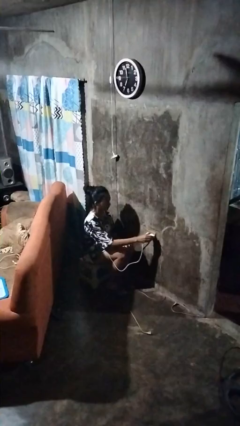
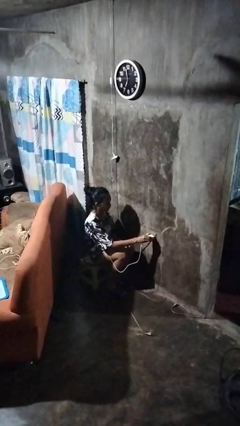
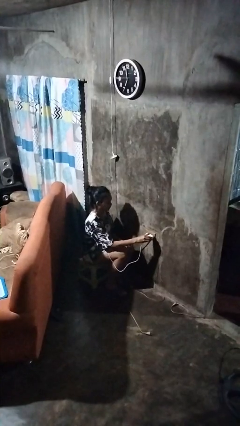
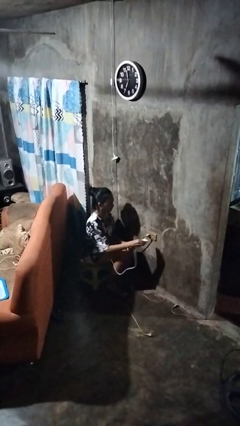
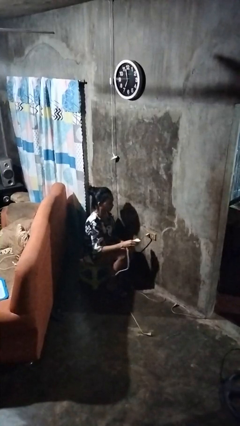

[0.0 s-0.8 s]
person unplugs from electrical socket

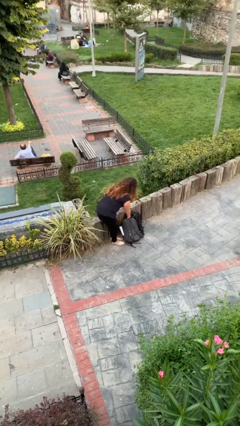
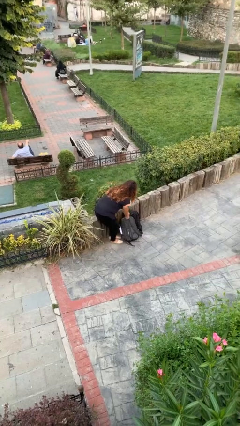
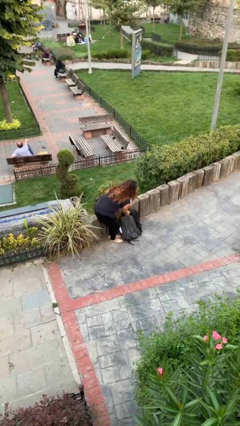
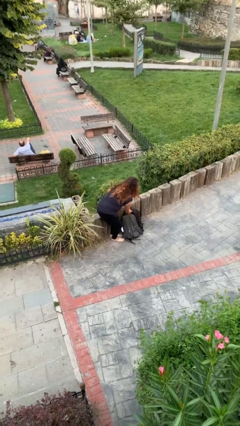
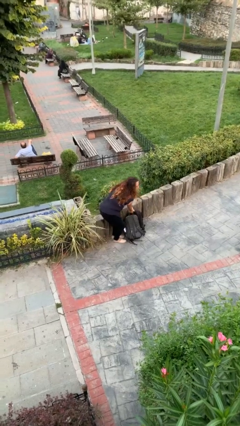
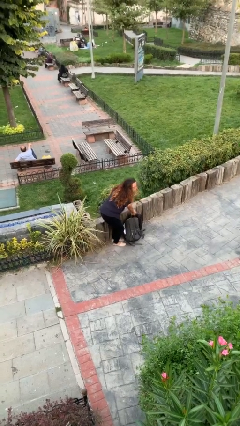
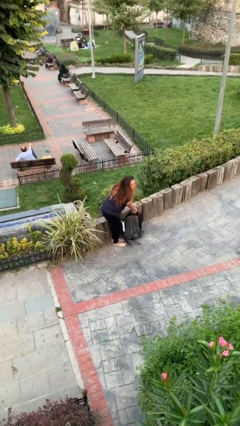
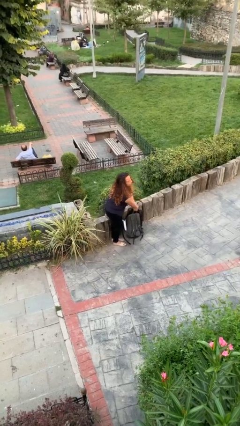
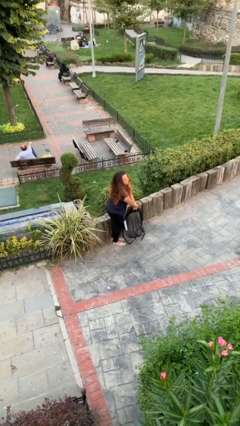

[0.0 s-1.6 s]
person picks up object from floor

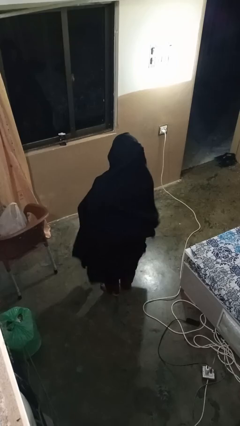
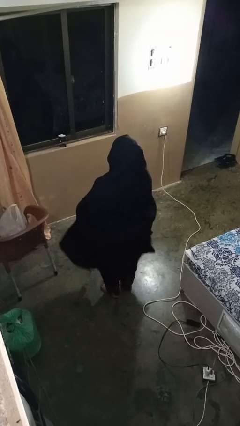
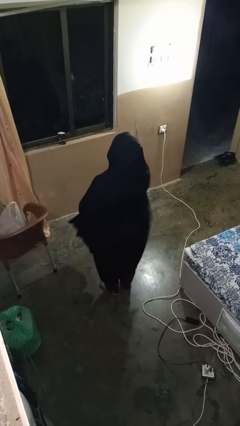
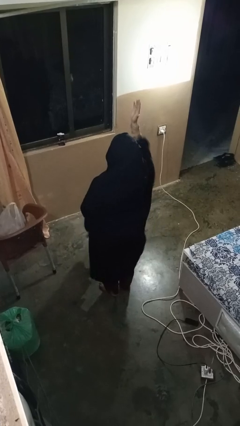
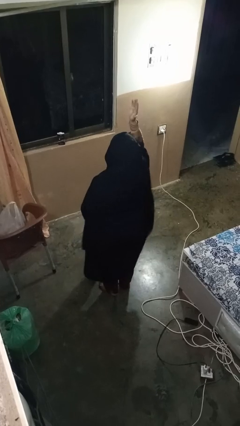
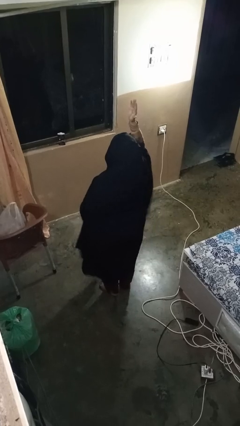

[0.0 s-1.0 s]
person gestures raise hand

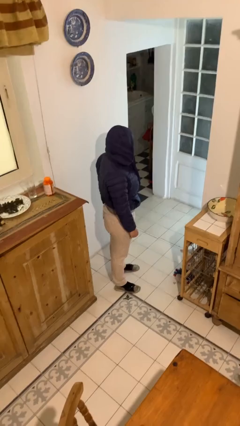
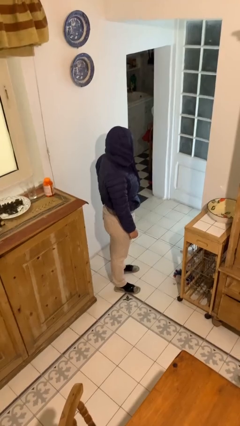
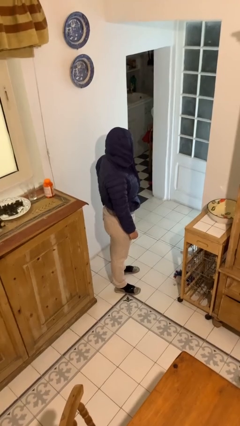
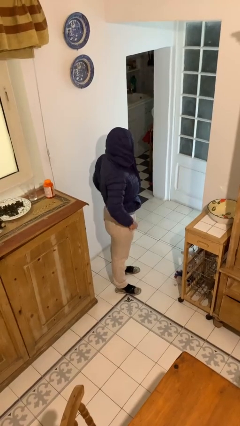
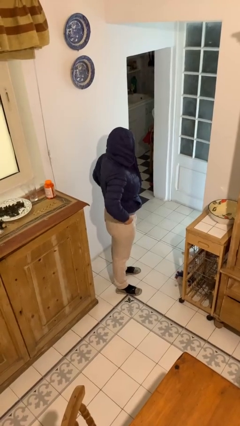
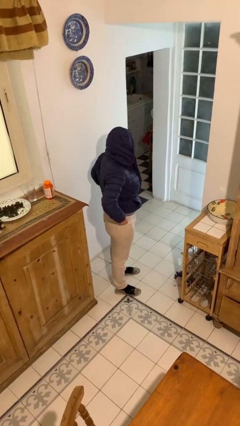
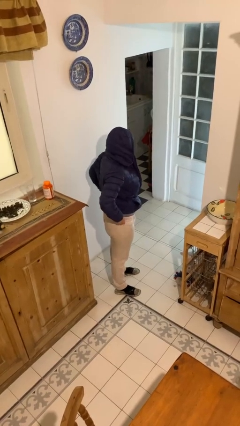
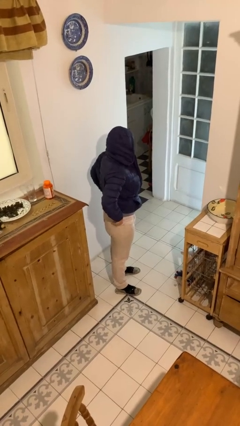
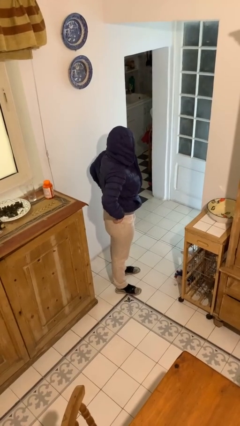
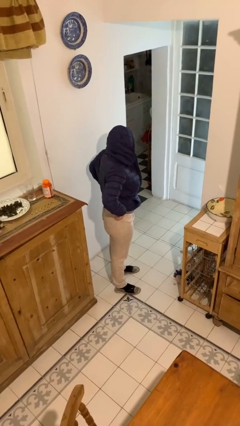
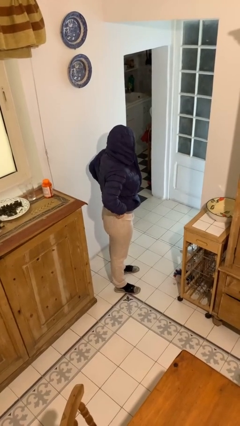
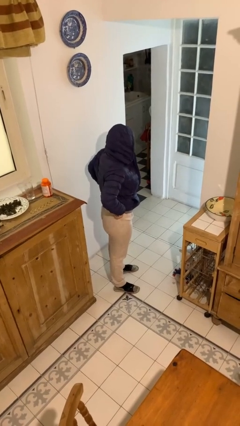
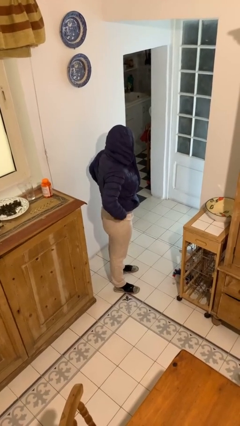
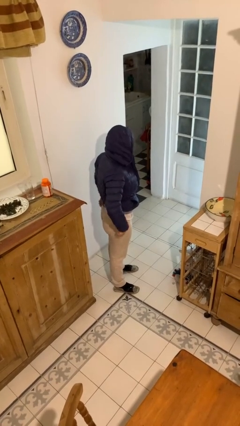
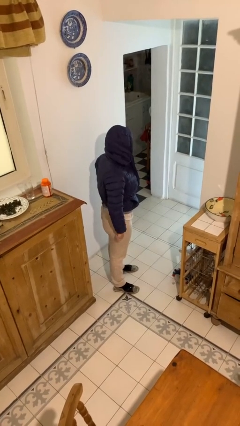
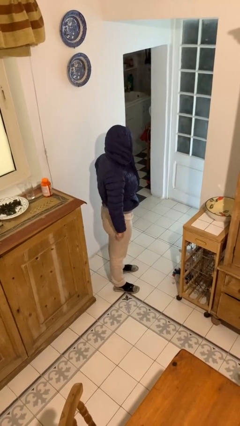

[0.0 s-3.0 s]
person hikes up pants

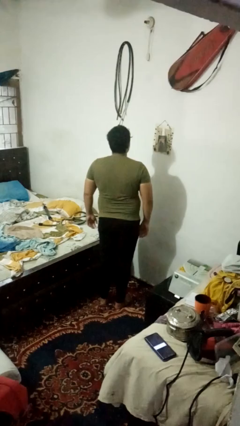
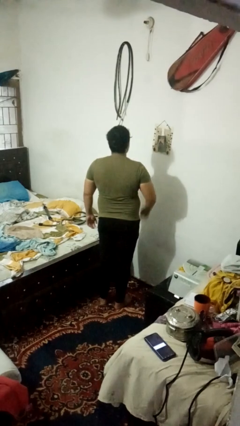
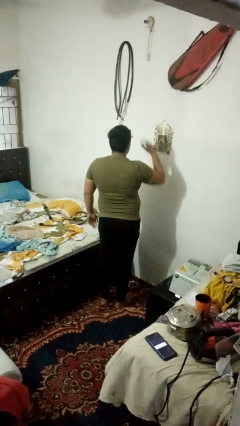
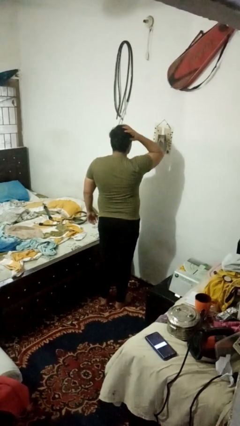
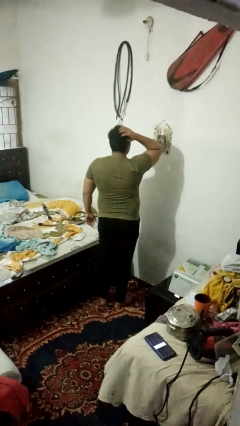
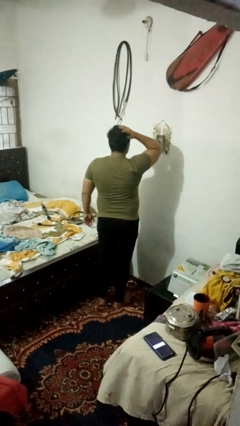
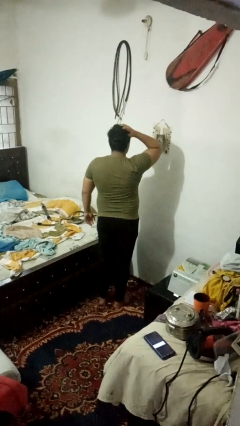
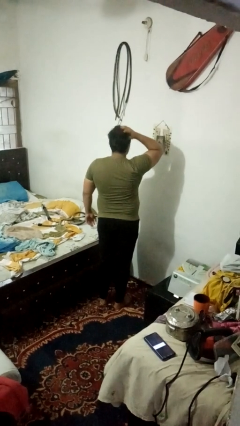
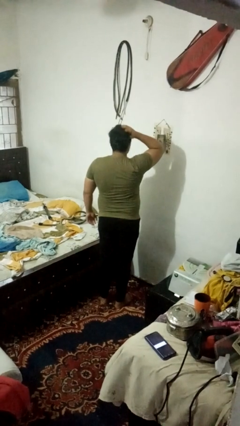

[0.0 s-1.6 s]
person strokes hair

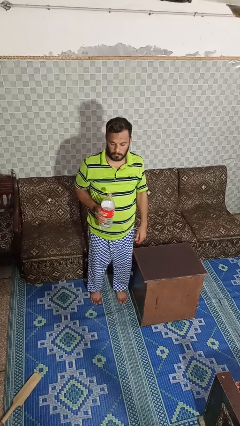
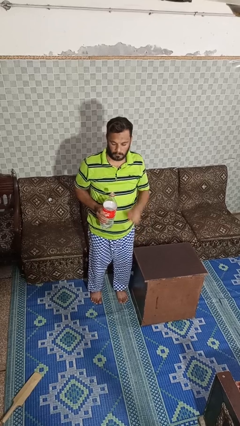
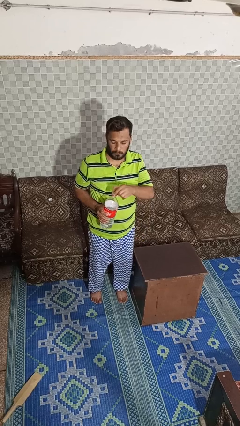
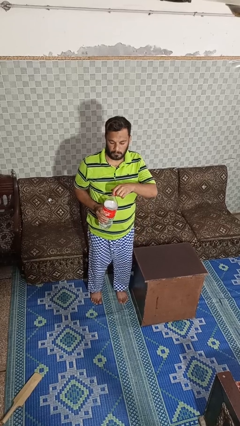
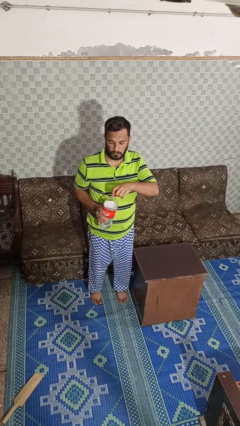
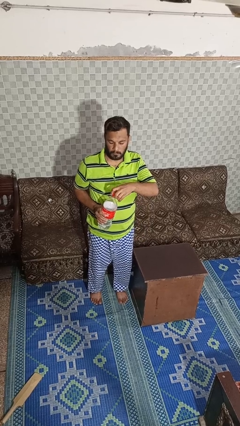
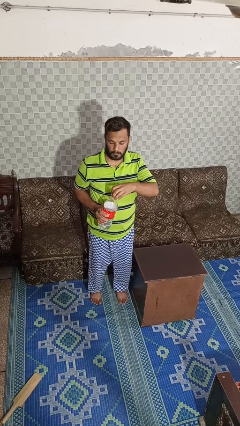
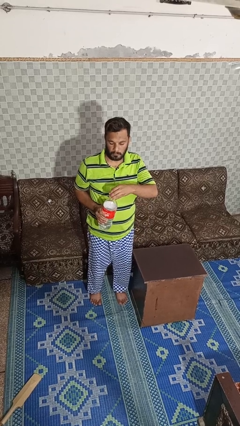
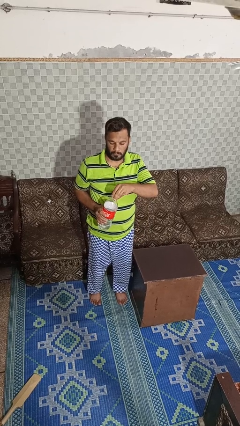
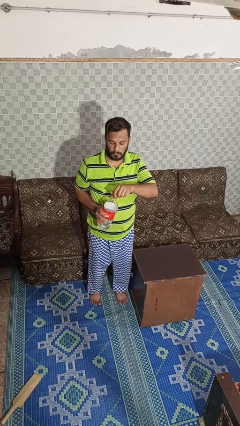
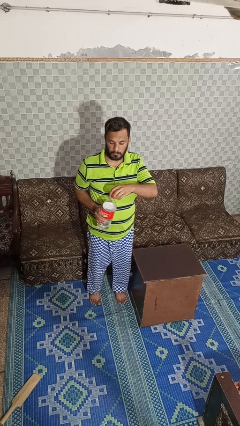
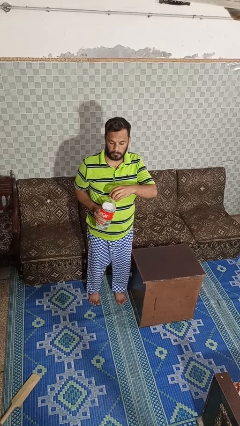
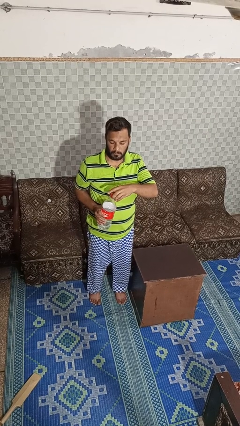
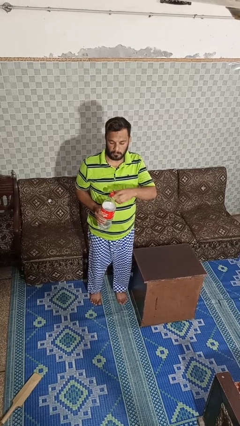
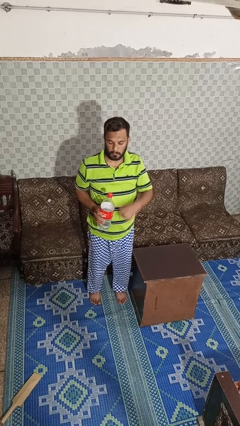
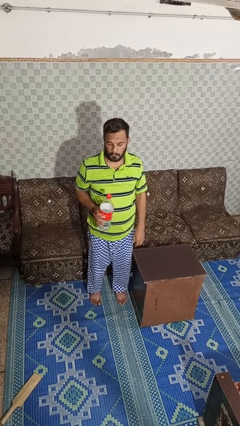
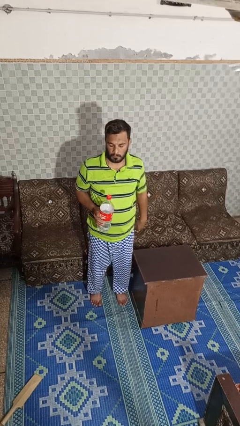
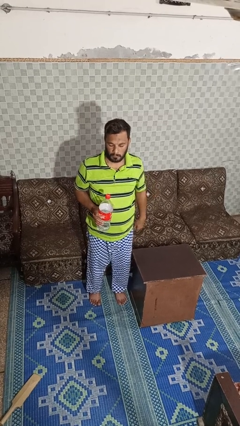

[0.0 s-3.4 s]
person screws lid to bottle

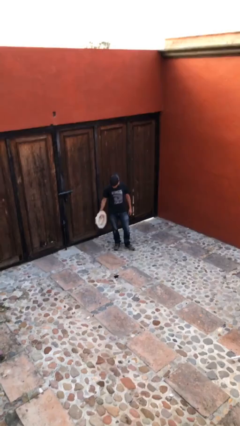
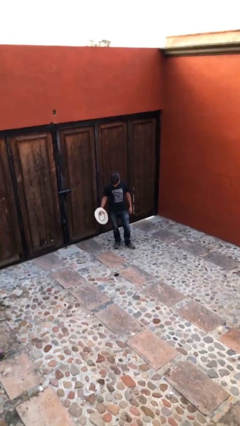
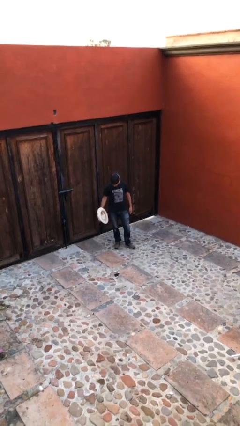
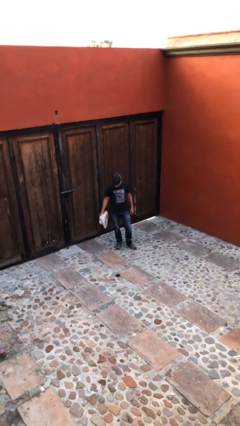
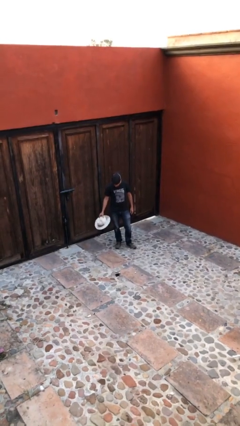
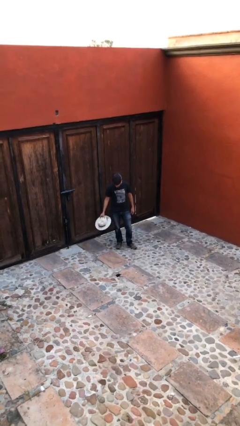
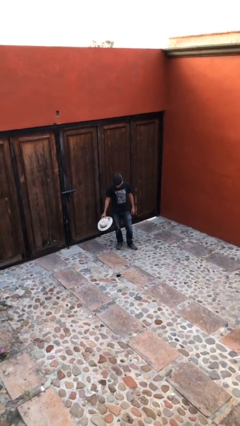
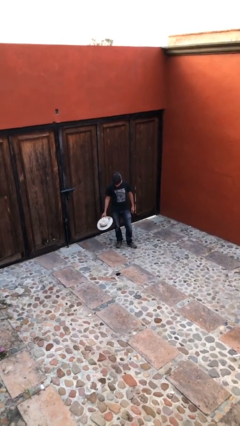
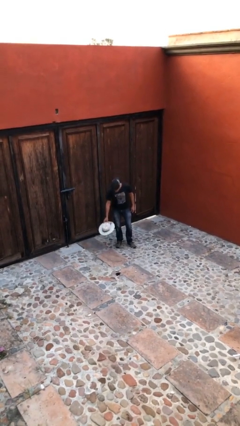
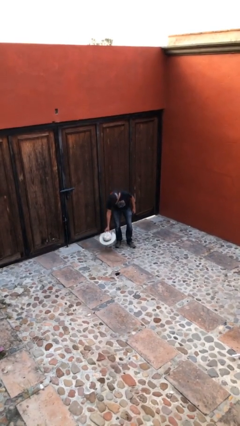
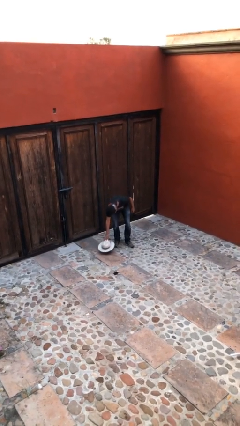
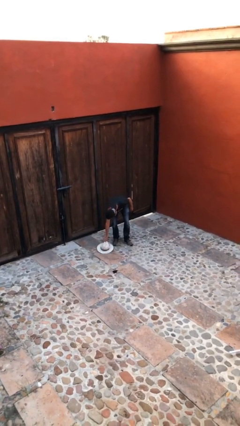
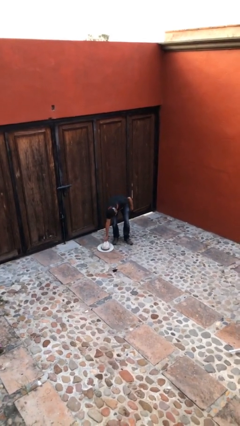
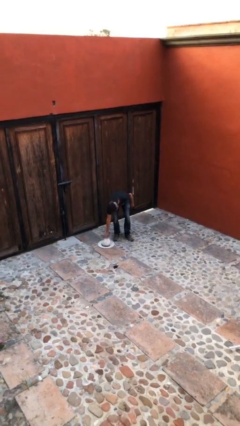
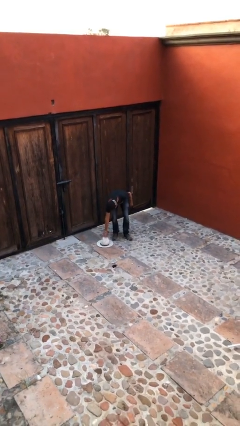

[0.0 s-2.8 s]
person puts down object on floor

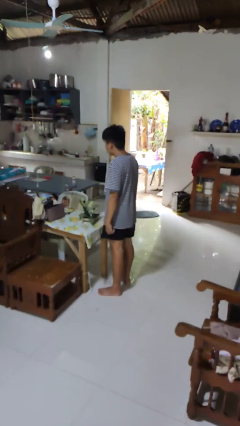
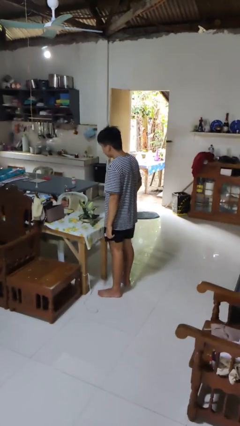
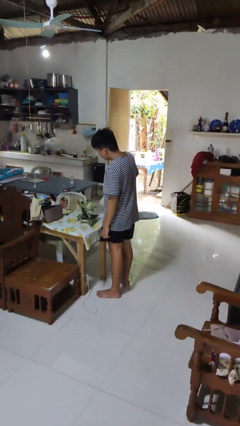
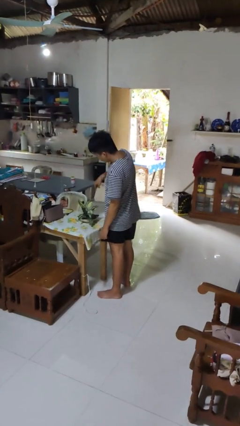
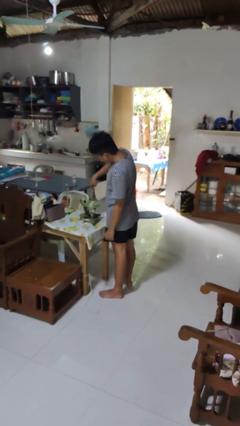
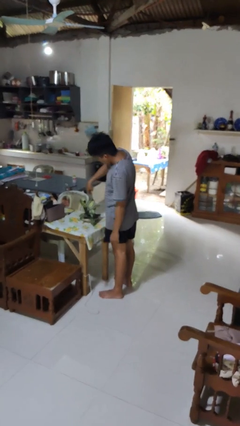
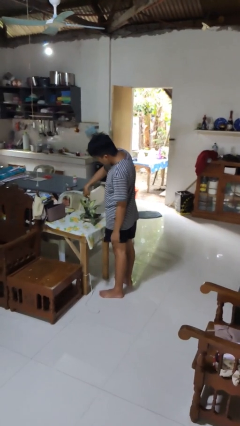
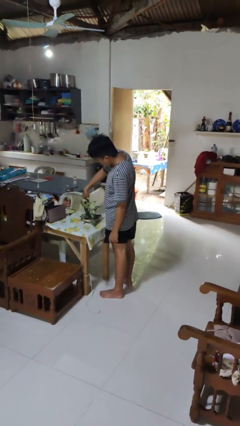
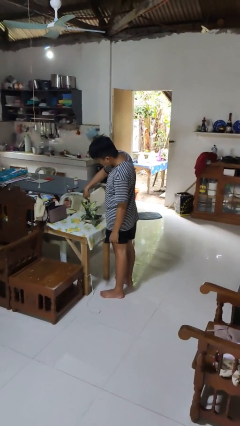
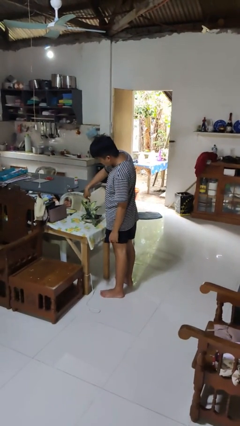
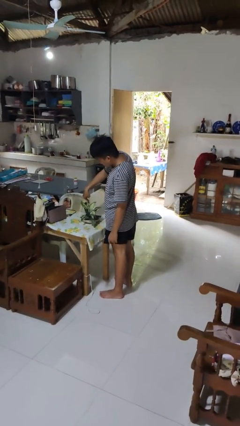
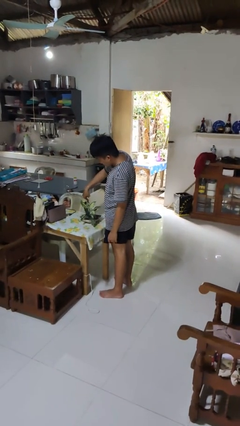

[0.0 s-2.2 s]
person waters houseplant

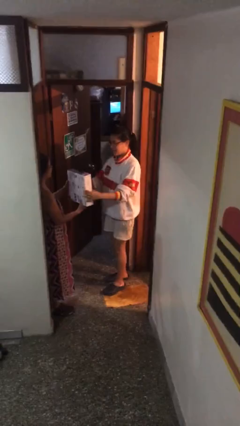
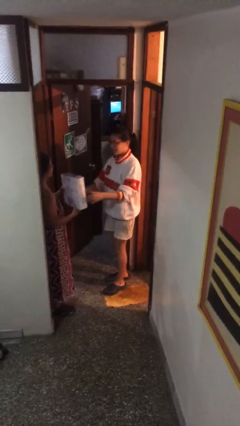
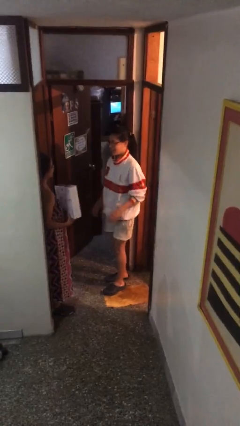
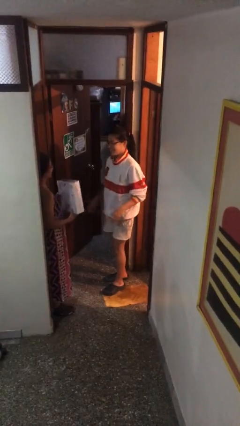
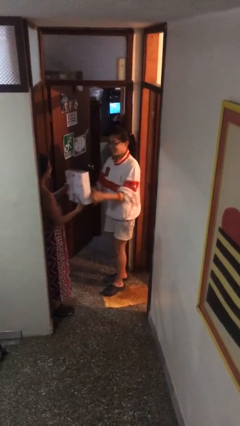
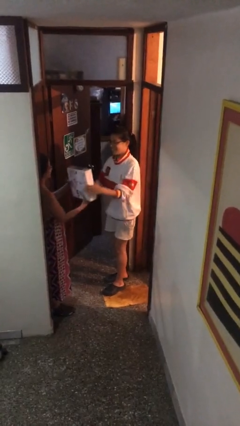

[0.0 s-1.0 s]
person transfers object to person
